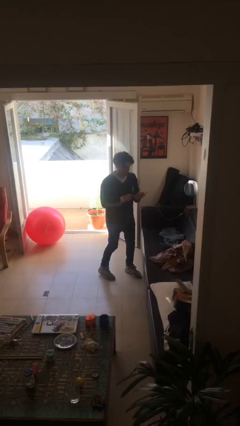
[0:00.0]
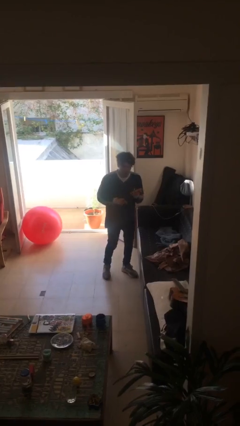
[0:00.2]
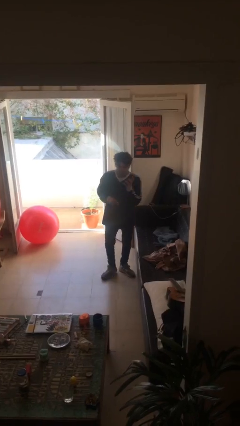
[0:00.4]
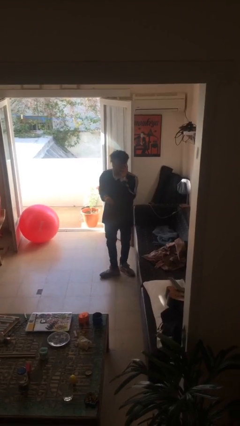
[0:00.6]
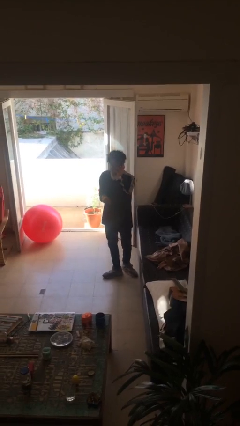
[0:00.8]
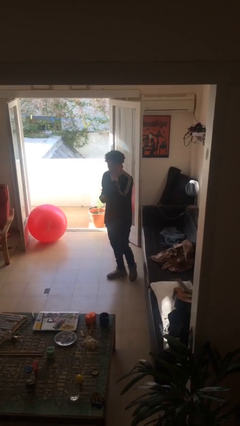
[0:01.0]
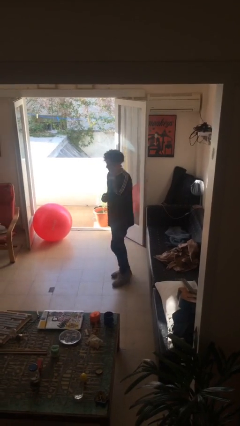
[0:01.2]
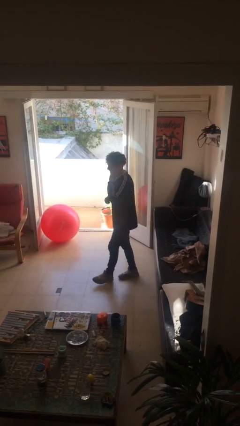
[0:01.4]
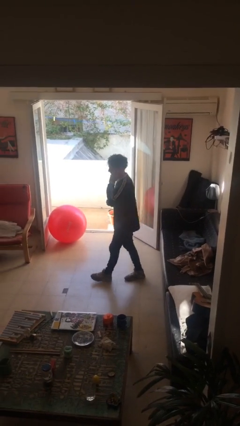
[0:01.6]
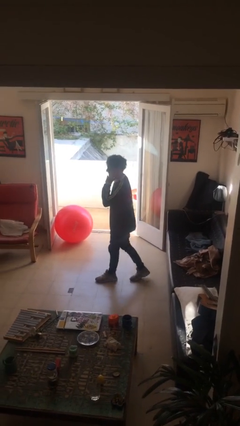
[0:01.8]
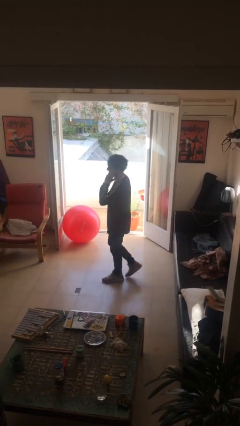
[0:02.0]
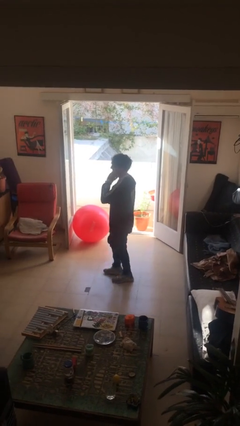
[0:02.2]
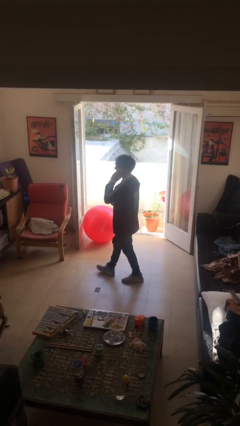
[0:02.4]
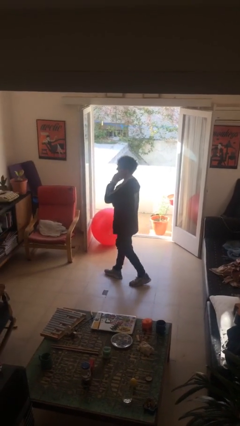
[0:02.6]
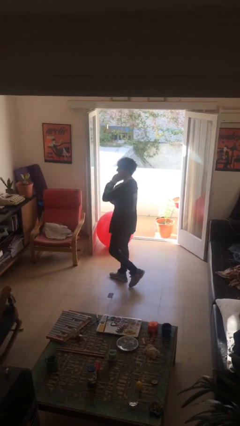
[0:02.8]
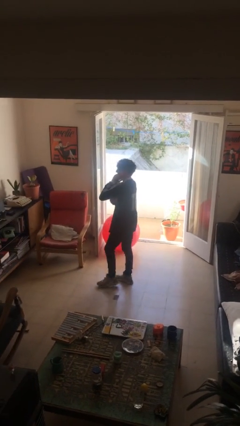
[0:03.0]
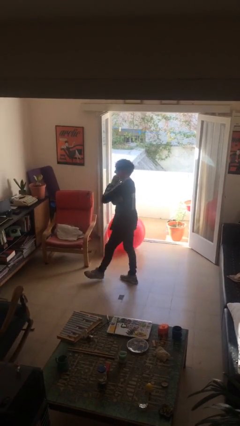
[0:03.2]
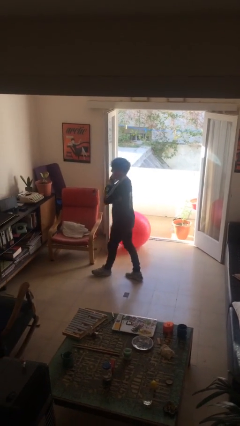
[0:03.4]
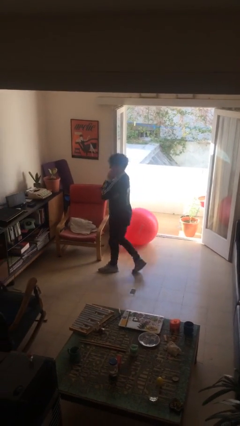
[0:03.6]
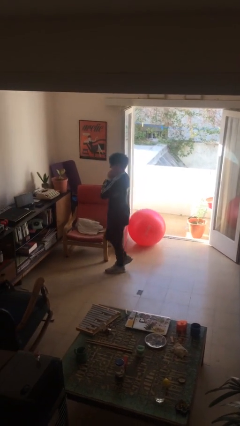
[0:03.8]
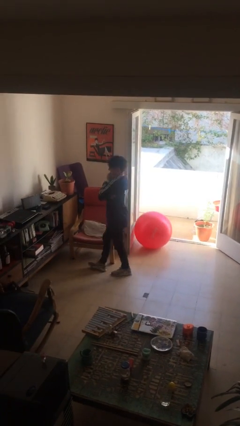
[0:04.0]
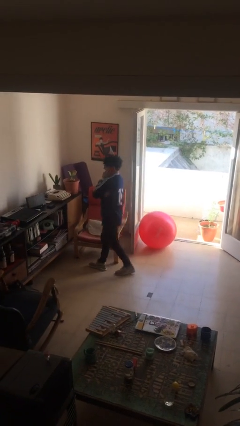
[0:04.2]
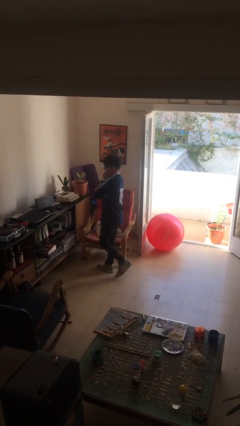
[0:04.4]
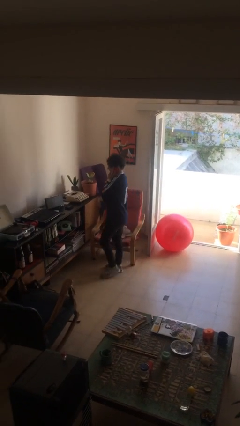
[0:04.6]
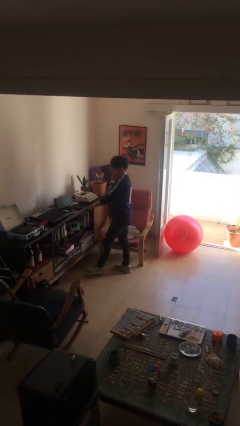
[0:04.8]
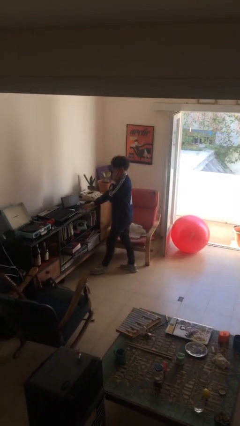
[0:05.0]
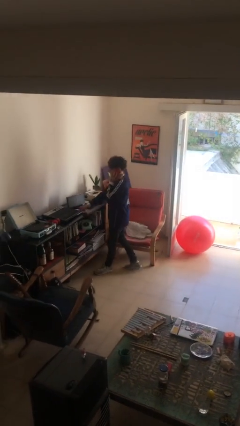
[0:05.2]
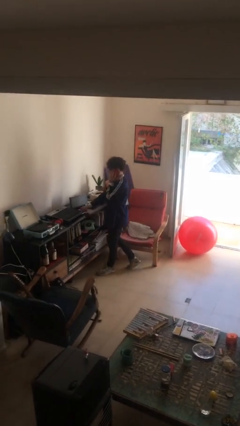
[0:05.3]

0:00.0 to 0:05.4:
person talks on phone

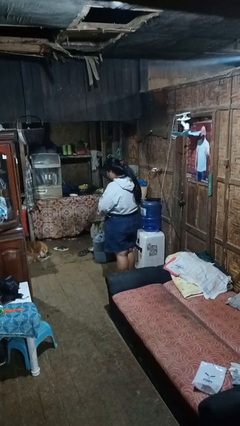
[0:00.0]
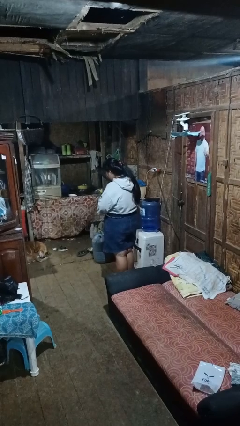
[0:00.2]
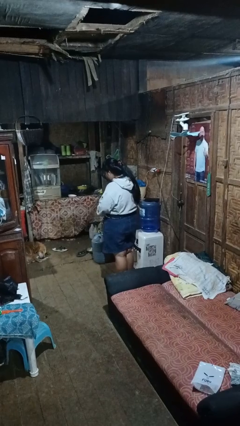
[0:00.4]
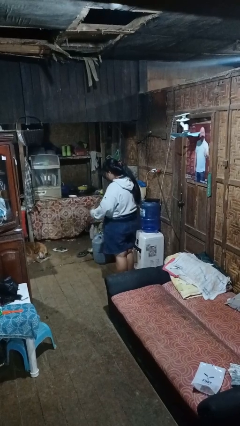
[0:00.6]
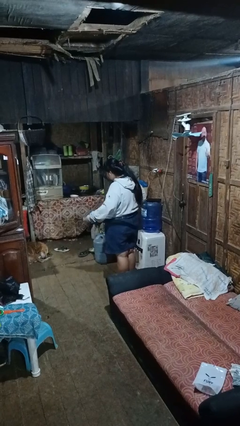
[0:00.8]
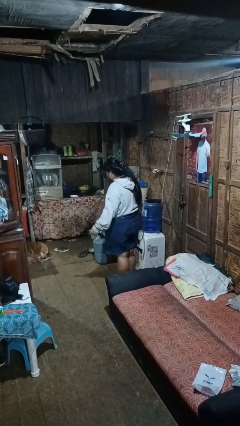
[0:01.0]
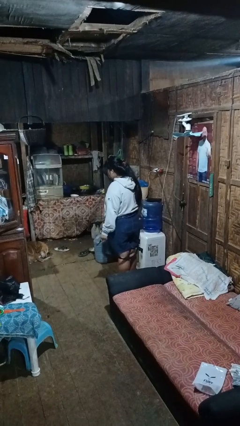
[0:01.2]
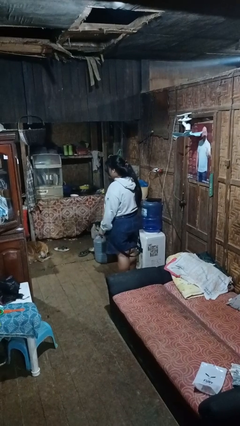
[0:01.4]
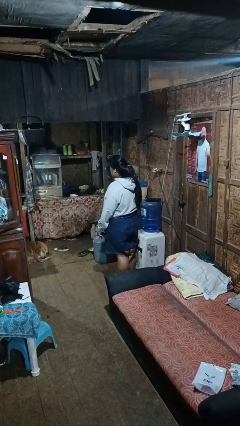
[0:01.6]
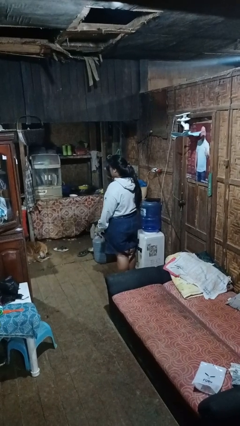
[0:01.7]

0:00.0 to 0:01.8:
person takes off belt

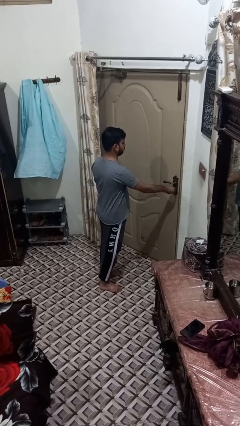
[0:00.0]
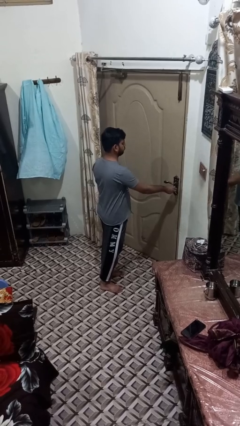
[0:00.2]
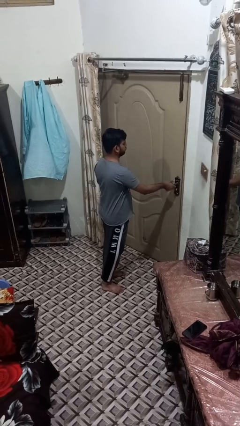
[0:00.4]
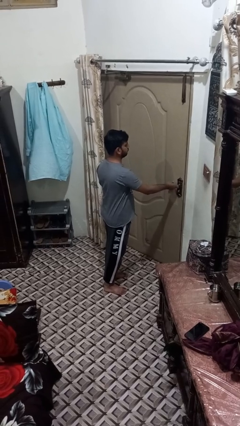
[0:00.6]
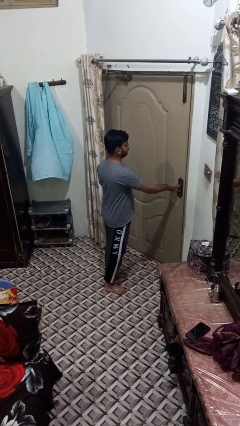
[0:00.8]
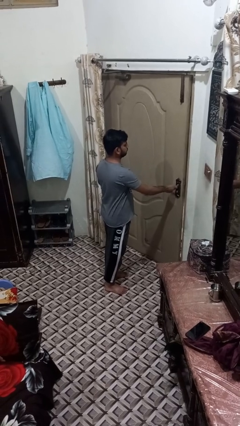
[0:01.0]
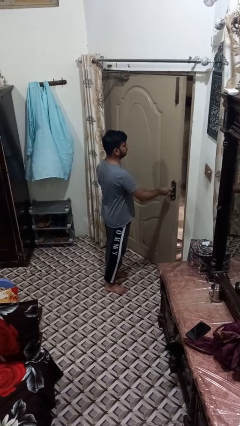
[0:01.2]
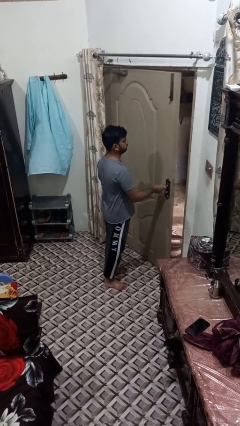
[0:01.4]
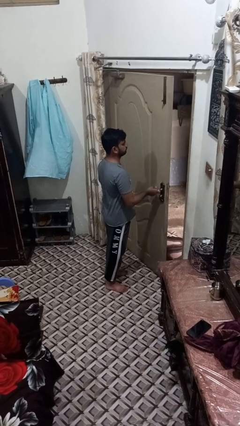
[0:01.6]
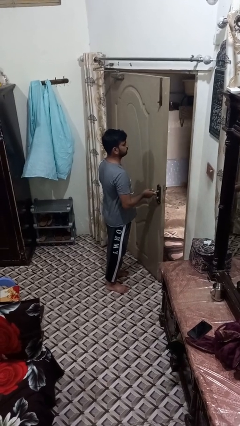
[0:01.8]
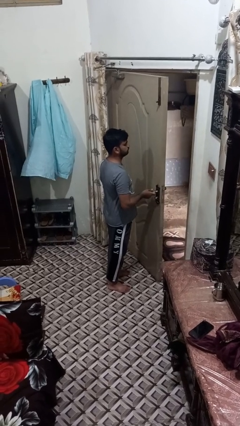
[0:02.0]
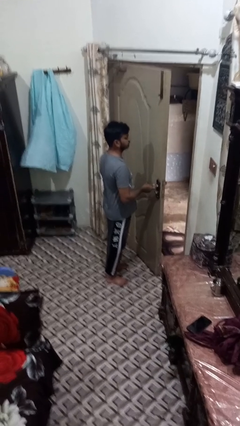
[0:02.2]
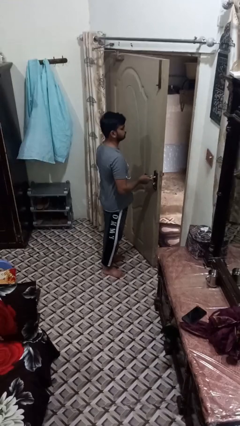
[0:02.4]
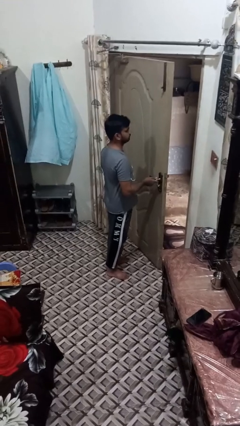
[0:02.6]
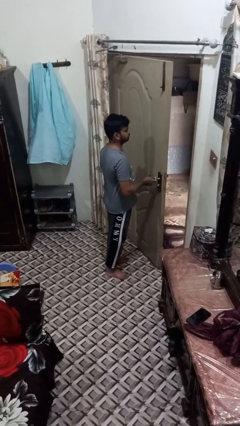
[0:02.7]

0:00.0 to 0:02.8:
person opens facility door

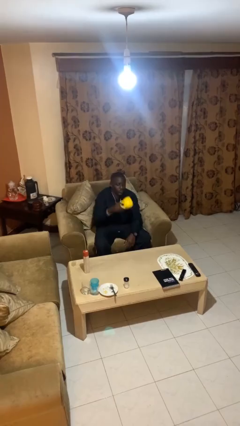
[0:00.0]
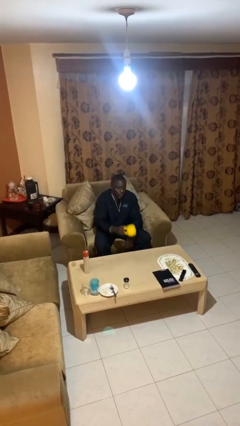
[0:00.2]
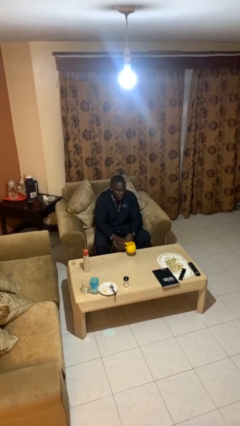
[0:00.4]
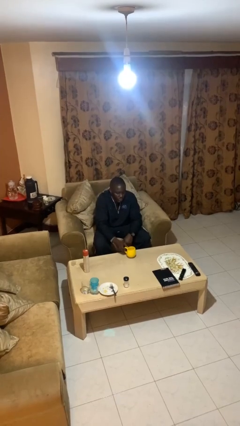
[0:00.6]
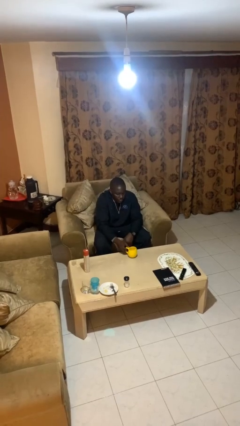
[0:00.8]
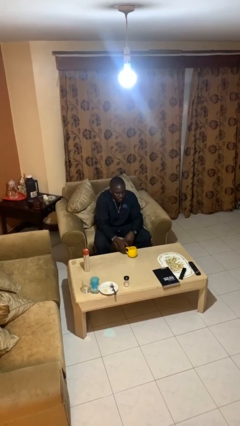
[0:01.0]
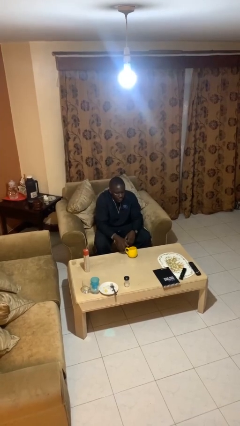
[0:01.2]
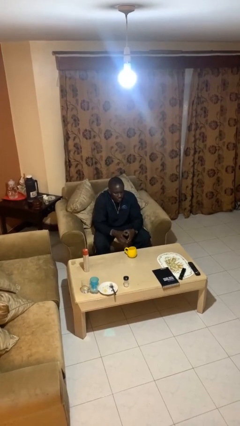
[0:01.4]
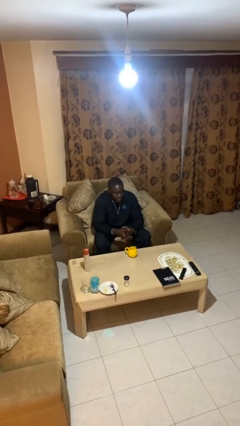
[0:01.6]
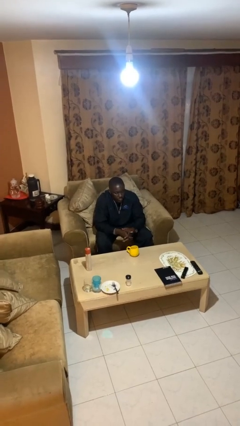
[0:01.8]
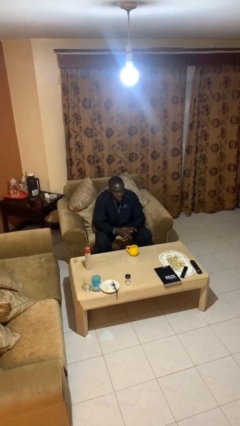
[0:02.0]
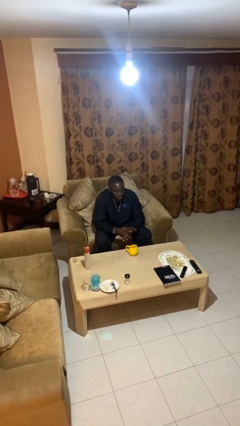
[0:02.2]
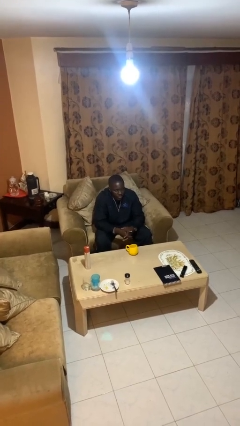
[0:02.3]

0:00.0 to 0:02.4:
person puts down object on table

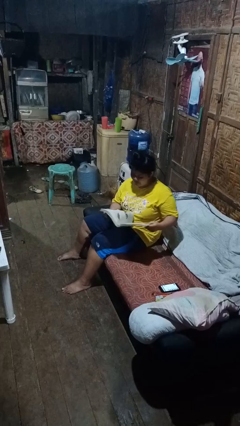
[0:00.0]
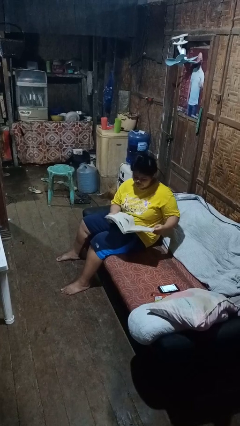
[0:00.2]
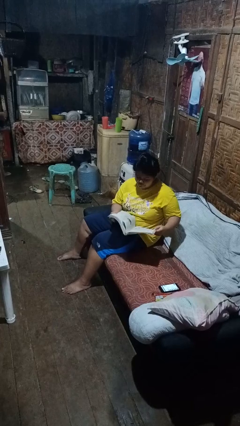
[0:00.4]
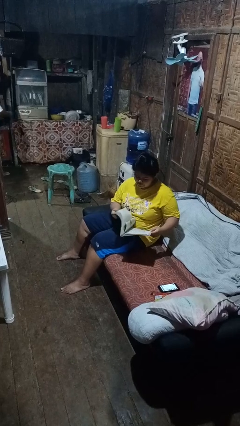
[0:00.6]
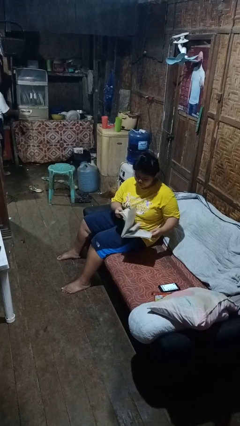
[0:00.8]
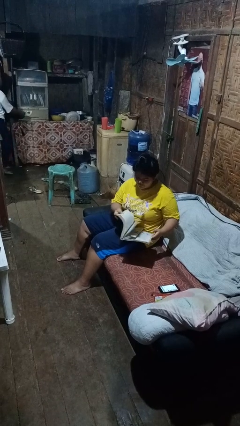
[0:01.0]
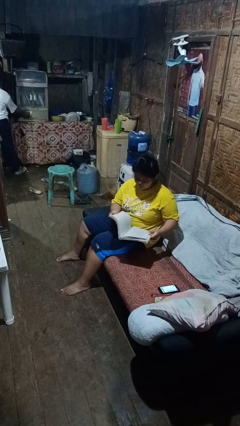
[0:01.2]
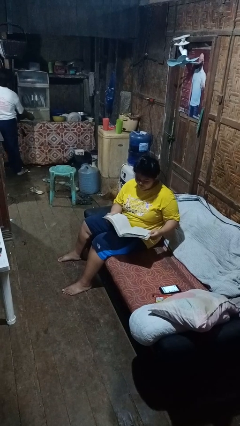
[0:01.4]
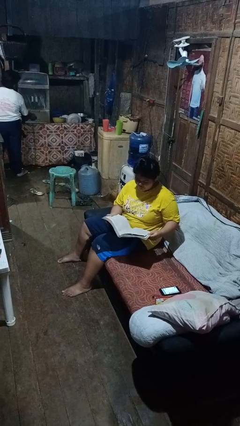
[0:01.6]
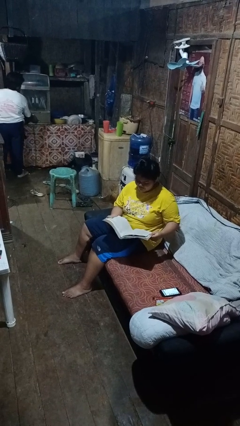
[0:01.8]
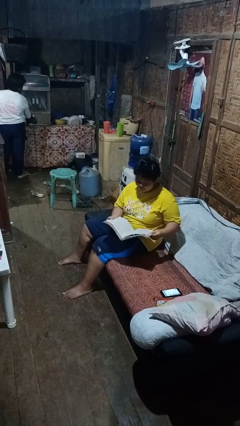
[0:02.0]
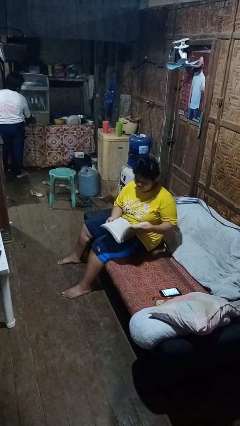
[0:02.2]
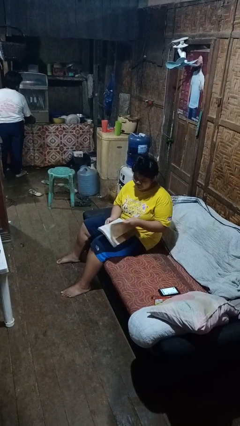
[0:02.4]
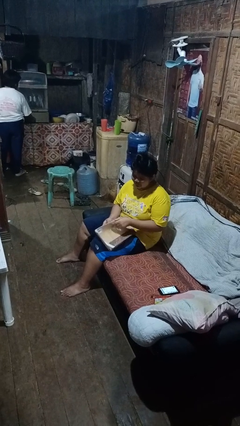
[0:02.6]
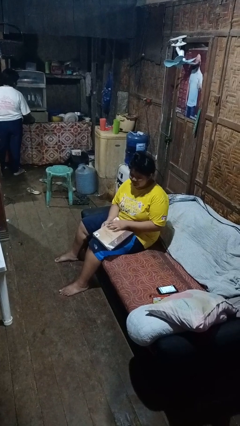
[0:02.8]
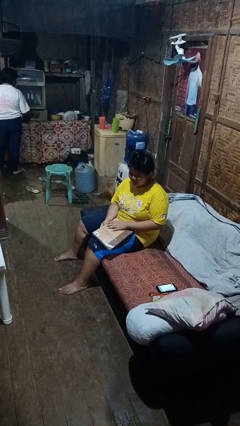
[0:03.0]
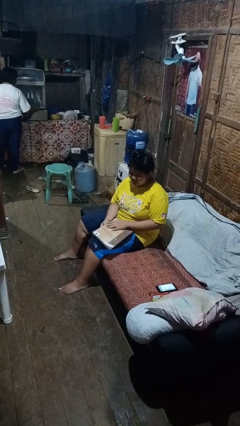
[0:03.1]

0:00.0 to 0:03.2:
person reads book

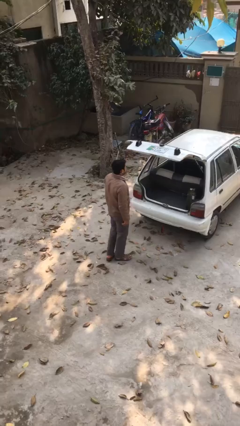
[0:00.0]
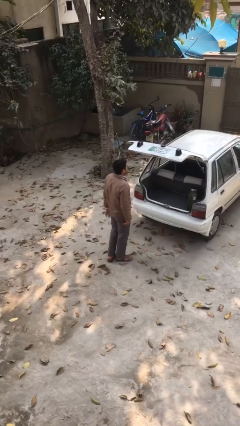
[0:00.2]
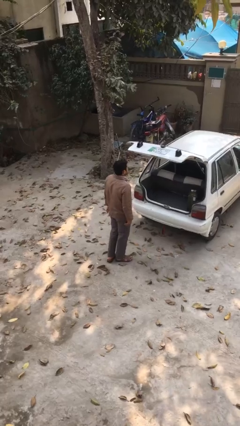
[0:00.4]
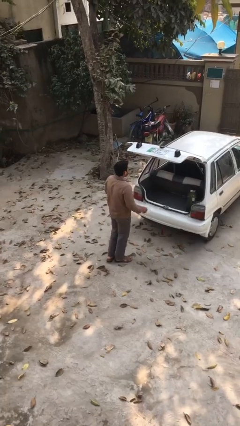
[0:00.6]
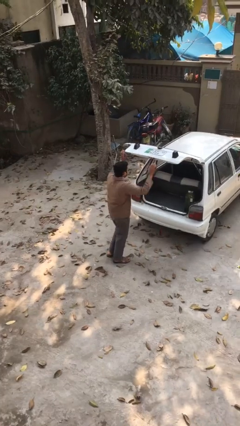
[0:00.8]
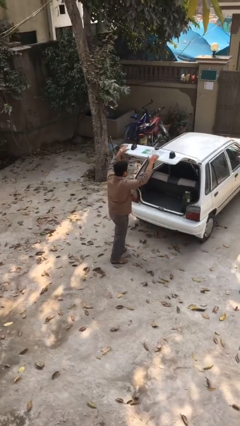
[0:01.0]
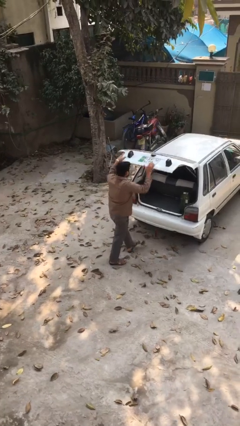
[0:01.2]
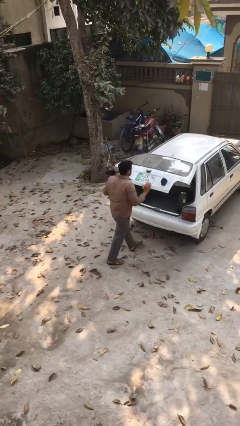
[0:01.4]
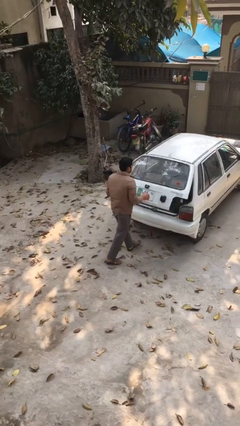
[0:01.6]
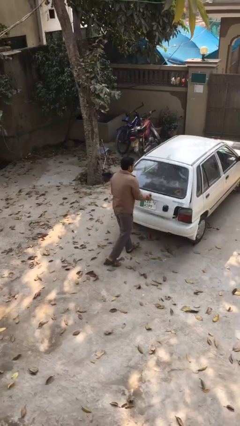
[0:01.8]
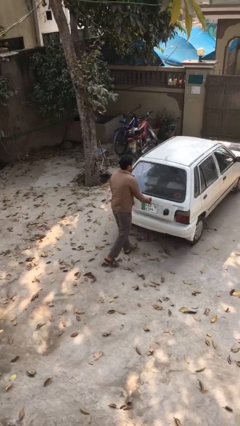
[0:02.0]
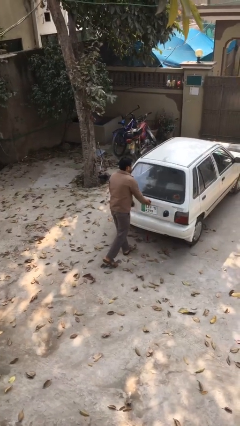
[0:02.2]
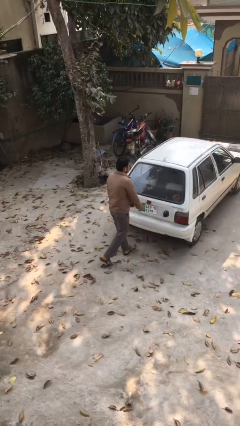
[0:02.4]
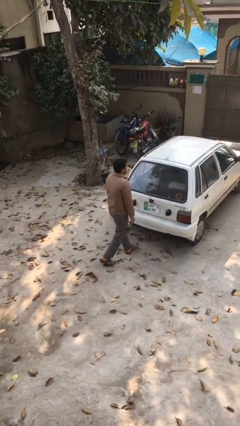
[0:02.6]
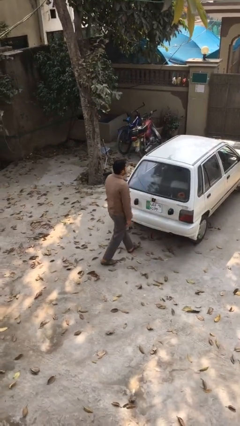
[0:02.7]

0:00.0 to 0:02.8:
person closes car trunk
